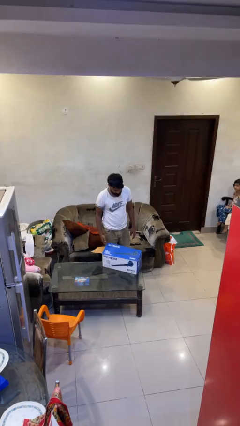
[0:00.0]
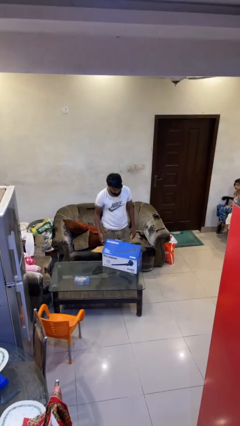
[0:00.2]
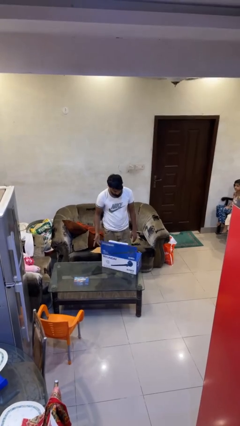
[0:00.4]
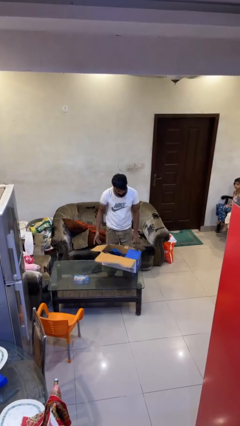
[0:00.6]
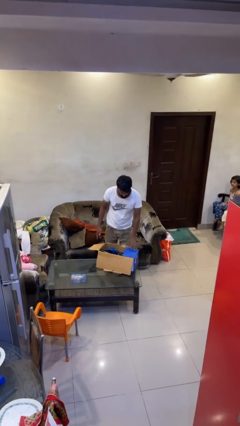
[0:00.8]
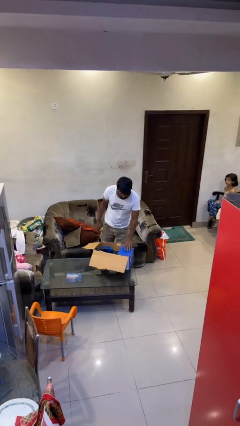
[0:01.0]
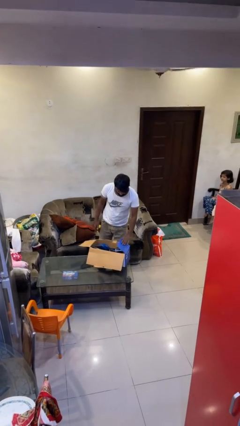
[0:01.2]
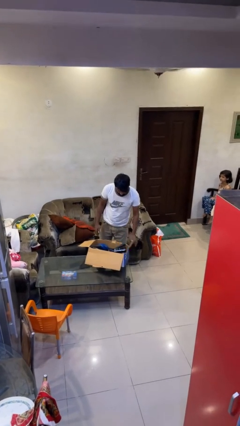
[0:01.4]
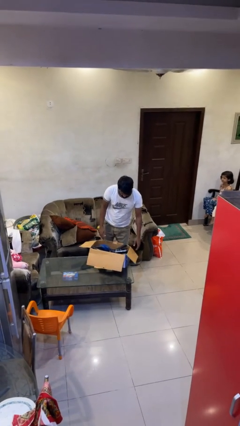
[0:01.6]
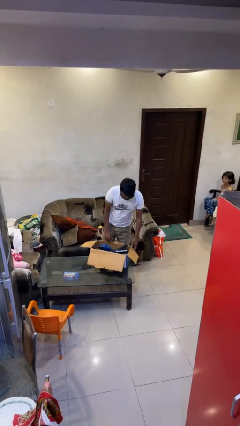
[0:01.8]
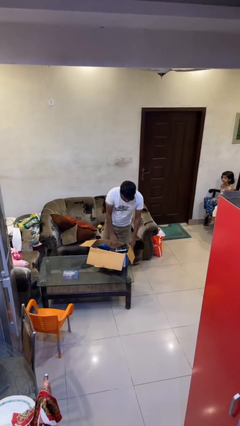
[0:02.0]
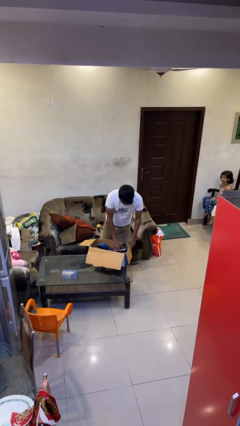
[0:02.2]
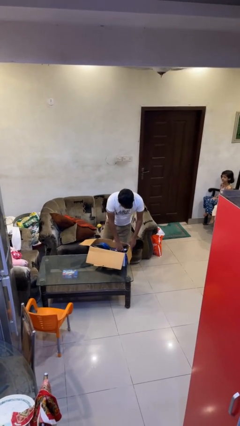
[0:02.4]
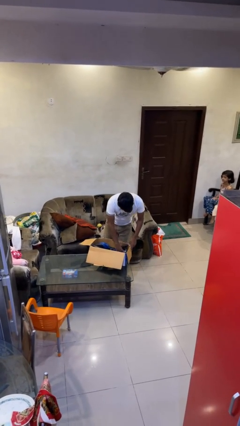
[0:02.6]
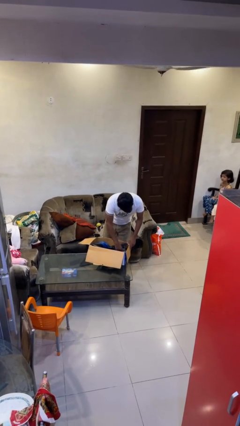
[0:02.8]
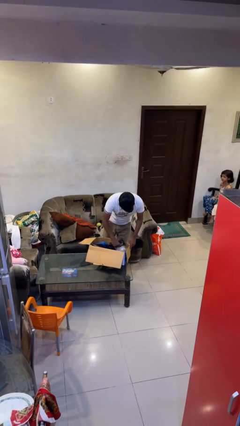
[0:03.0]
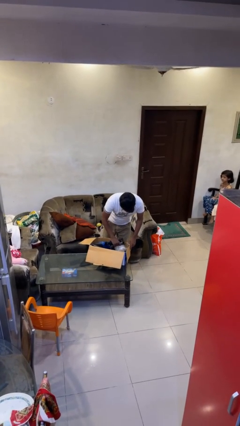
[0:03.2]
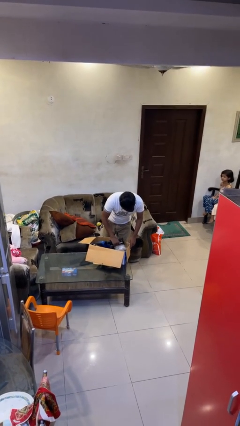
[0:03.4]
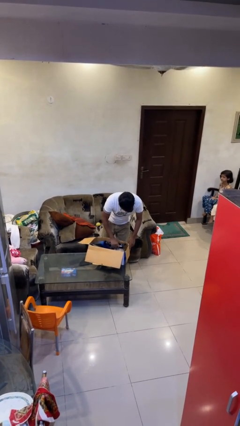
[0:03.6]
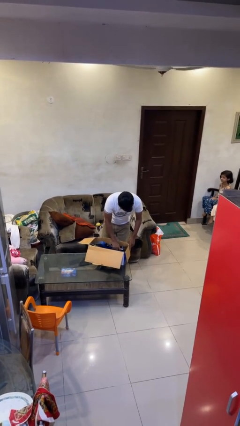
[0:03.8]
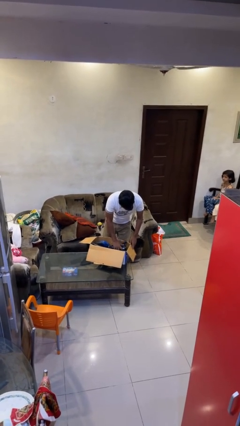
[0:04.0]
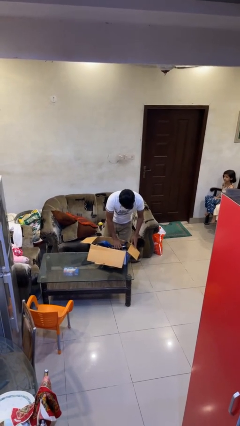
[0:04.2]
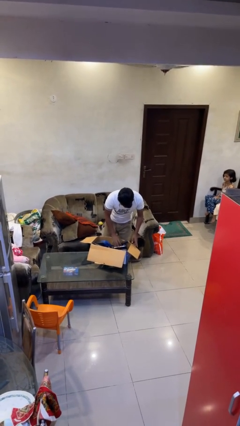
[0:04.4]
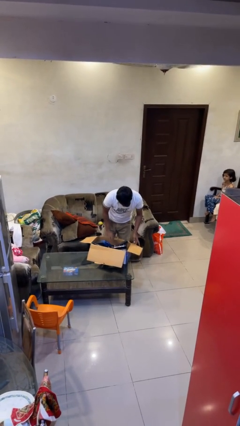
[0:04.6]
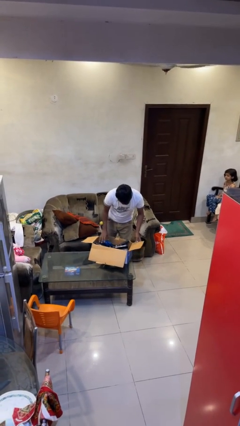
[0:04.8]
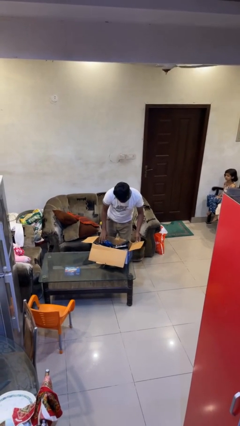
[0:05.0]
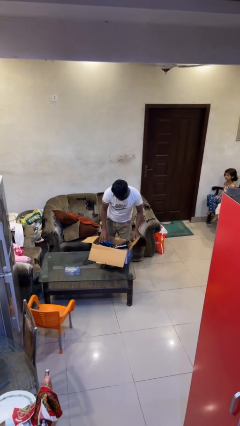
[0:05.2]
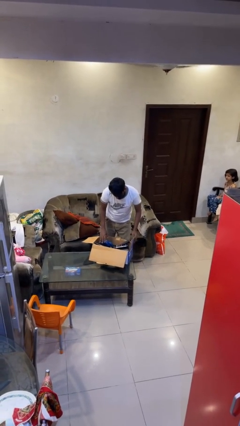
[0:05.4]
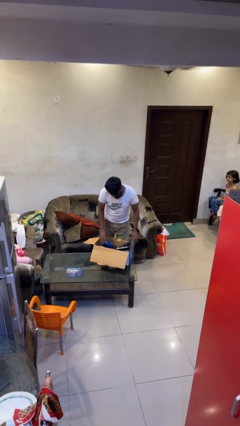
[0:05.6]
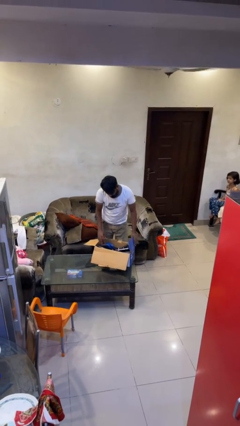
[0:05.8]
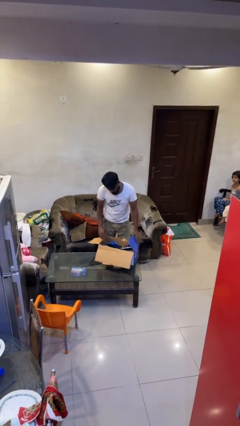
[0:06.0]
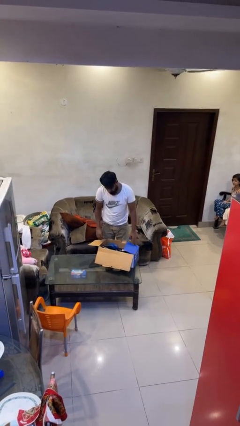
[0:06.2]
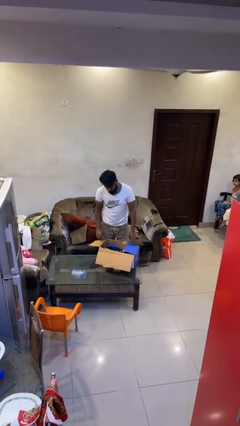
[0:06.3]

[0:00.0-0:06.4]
person searches in box

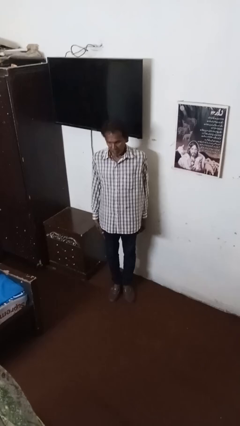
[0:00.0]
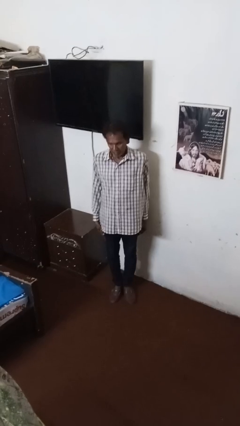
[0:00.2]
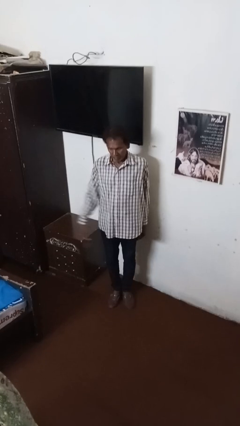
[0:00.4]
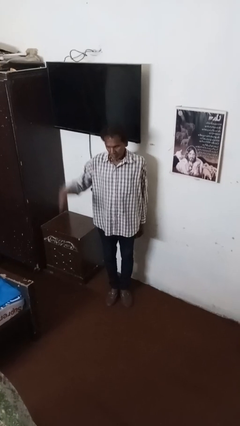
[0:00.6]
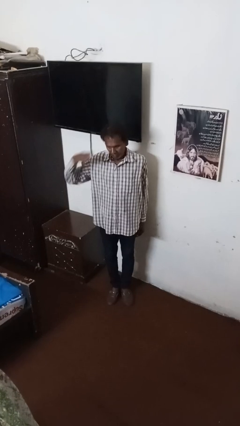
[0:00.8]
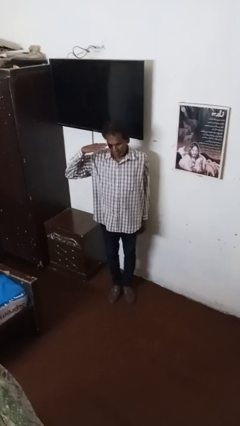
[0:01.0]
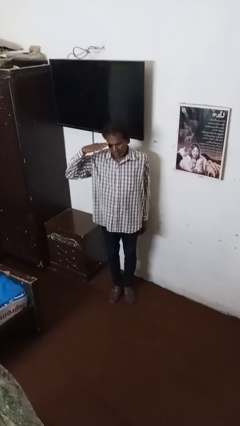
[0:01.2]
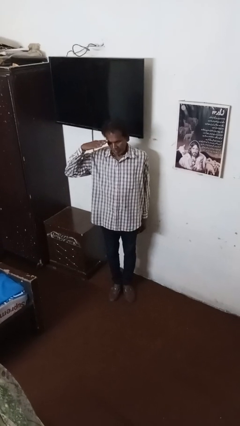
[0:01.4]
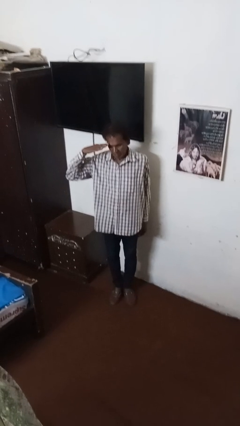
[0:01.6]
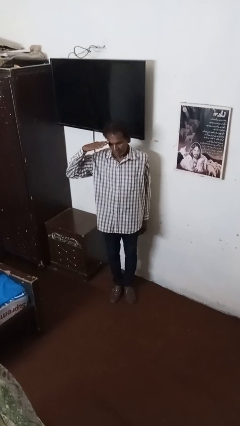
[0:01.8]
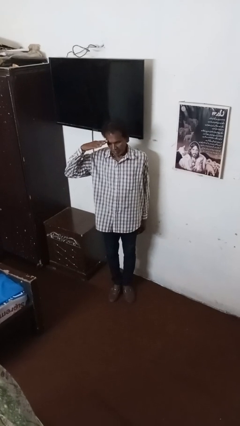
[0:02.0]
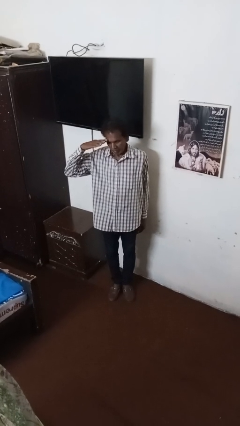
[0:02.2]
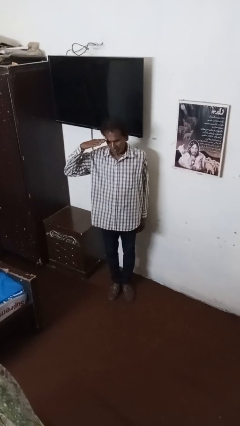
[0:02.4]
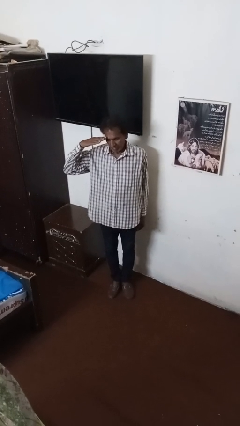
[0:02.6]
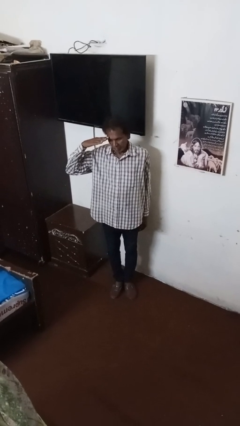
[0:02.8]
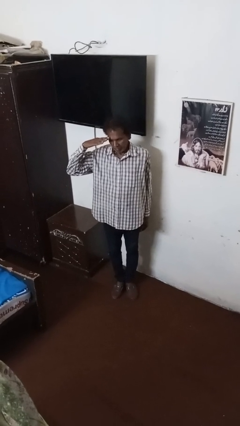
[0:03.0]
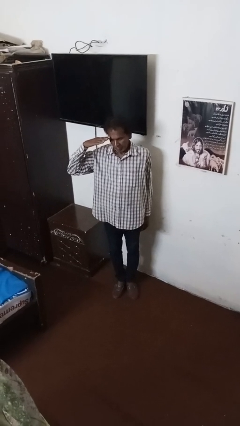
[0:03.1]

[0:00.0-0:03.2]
person salutes

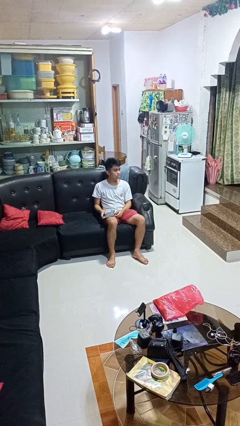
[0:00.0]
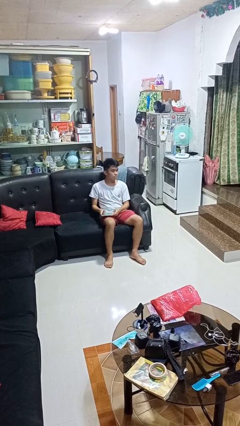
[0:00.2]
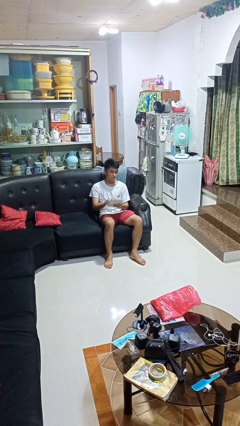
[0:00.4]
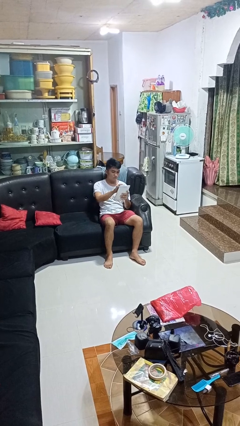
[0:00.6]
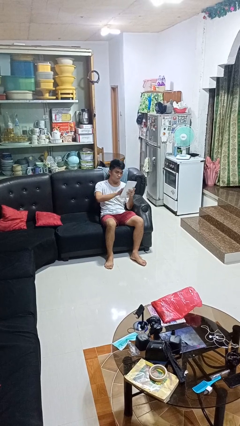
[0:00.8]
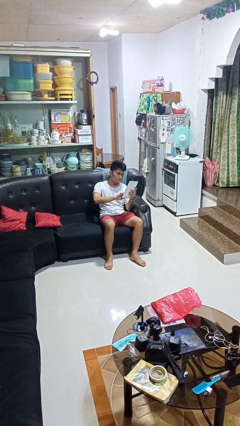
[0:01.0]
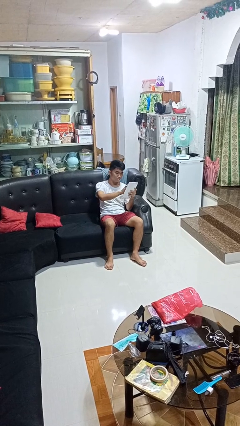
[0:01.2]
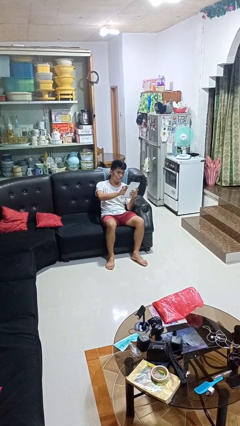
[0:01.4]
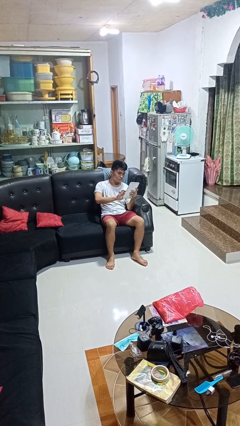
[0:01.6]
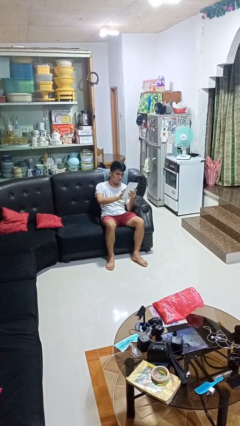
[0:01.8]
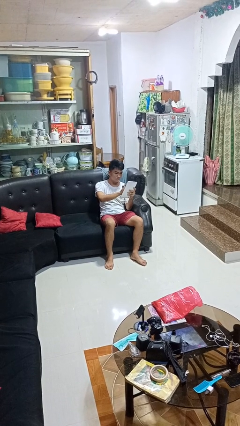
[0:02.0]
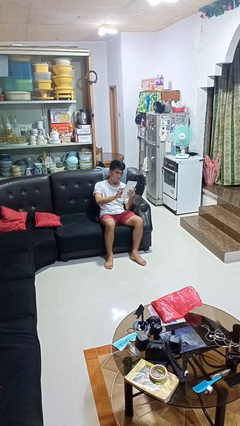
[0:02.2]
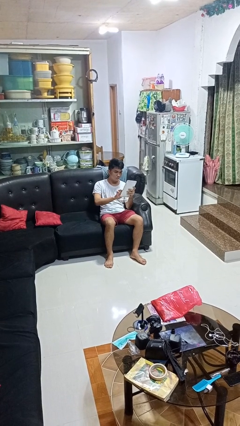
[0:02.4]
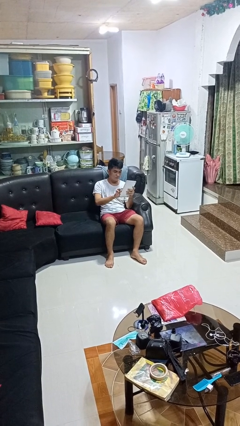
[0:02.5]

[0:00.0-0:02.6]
person interacts with tablet

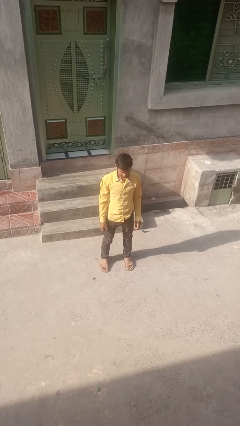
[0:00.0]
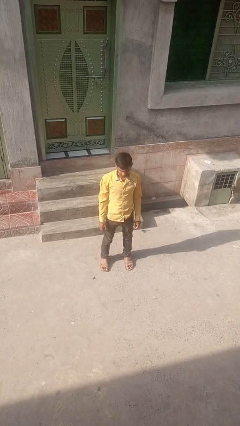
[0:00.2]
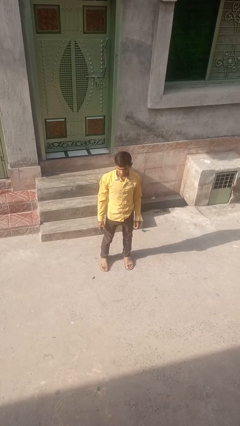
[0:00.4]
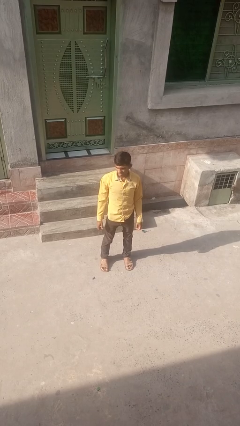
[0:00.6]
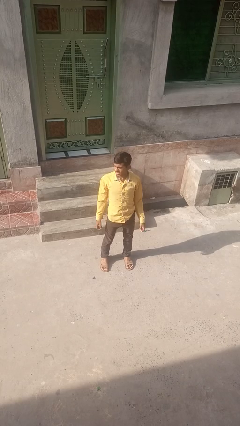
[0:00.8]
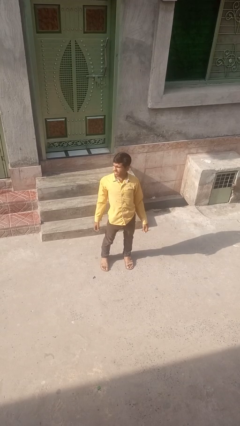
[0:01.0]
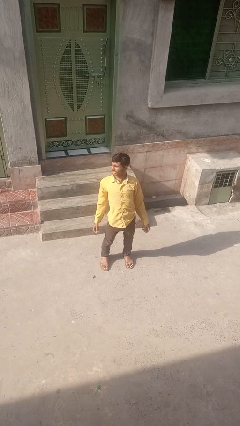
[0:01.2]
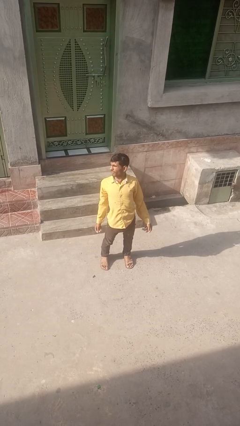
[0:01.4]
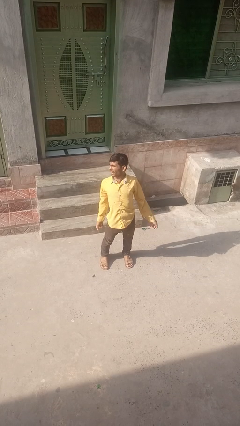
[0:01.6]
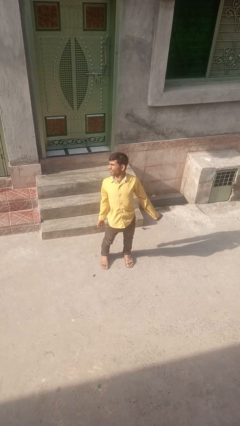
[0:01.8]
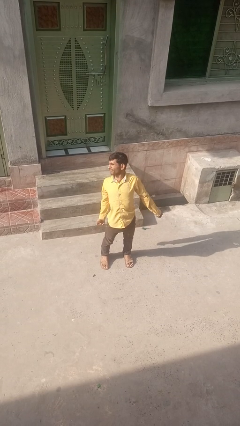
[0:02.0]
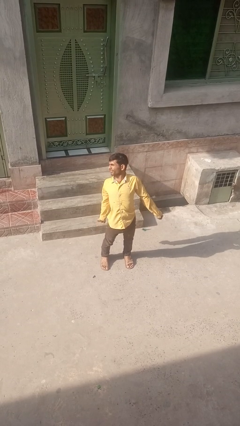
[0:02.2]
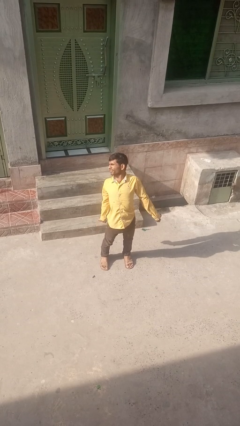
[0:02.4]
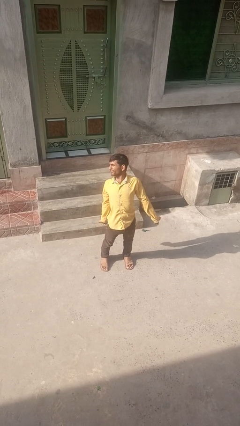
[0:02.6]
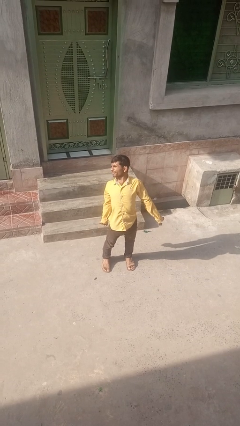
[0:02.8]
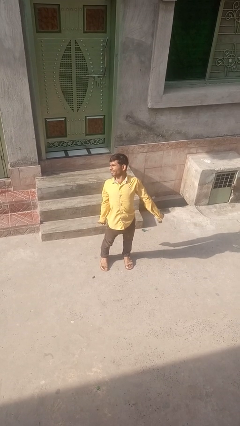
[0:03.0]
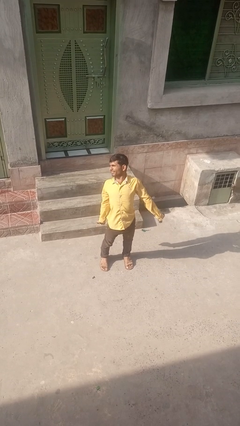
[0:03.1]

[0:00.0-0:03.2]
person stretches back

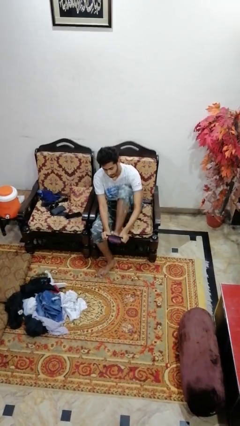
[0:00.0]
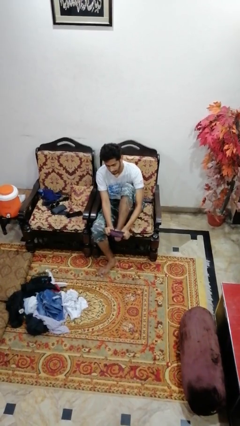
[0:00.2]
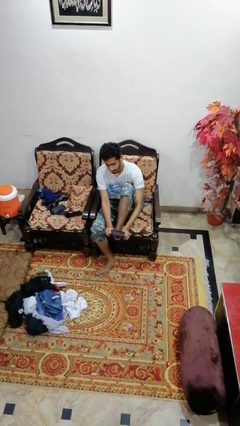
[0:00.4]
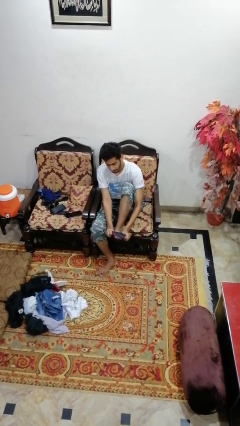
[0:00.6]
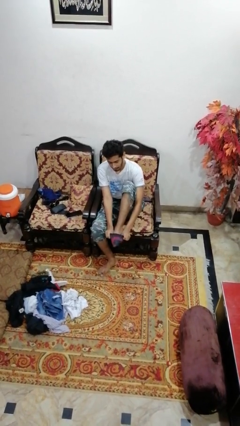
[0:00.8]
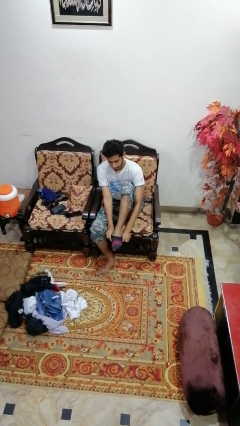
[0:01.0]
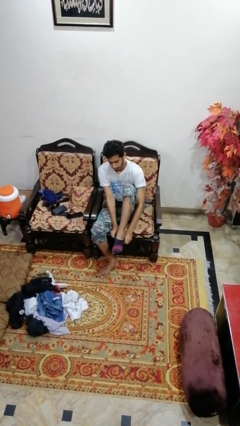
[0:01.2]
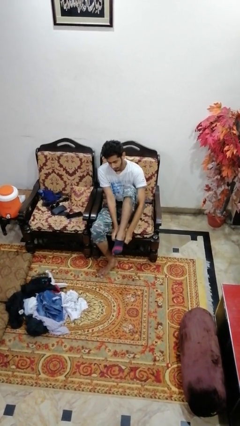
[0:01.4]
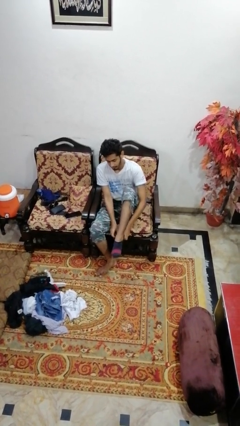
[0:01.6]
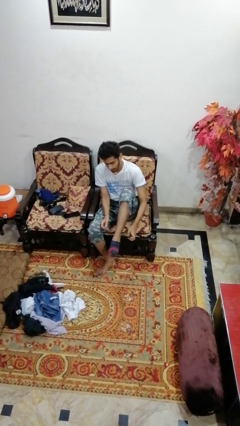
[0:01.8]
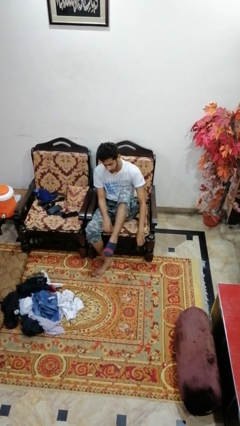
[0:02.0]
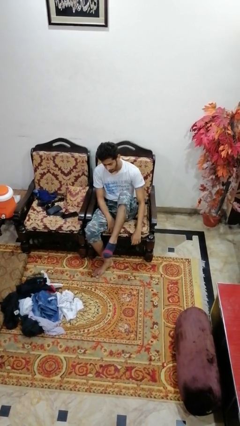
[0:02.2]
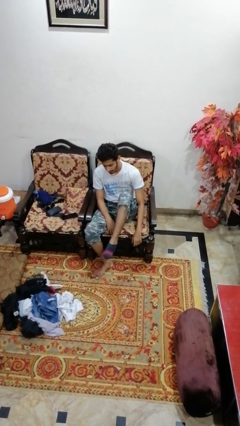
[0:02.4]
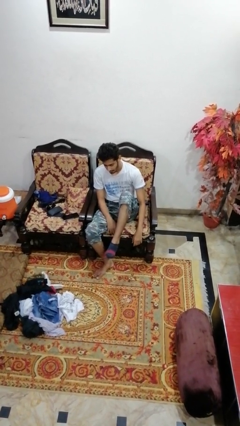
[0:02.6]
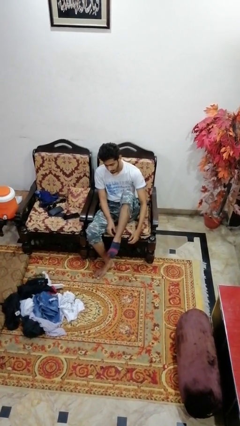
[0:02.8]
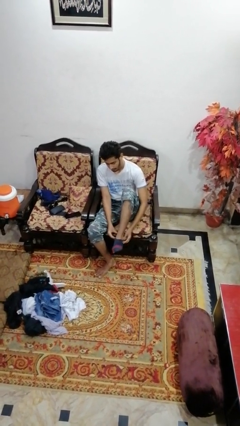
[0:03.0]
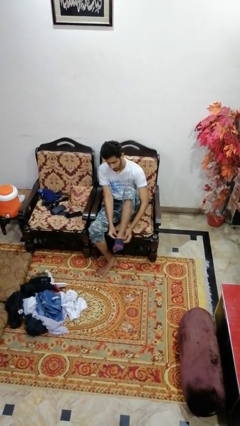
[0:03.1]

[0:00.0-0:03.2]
person puts on socks
